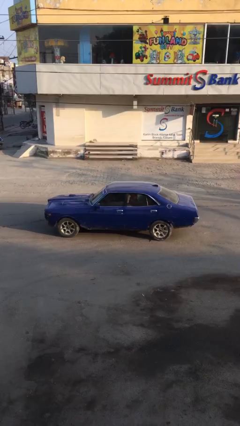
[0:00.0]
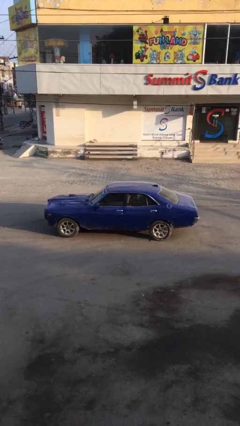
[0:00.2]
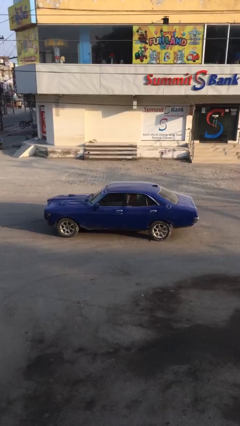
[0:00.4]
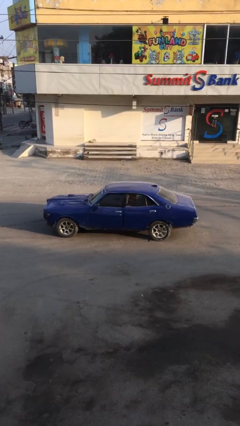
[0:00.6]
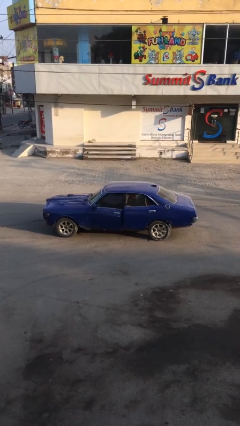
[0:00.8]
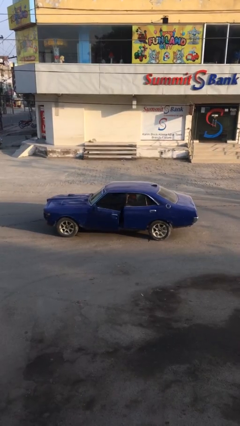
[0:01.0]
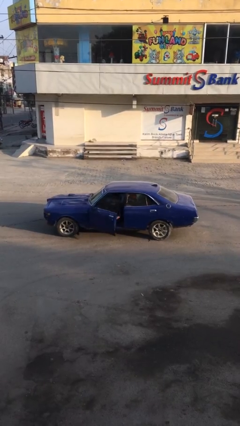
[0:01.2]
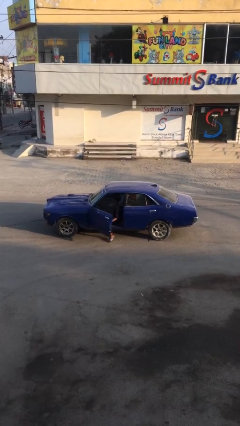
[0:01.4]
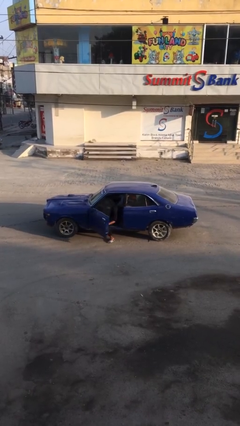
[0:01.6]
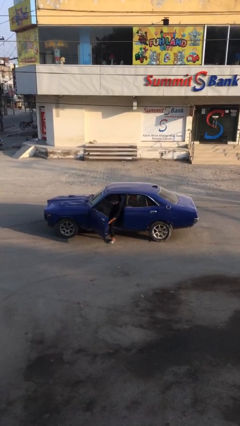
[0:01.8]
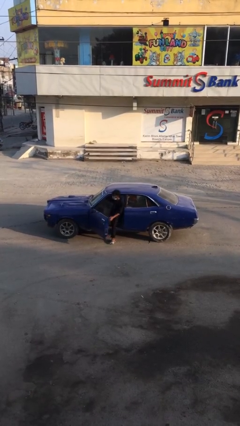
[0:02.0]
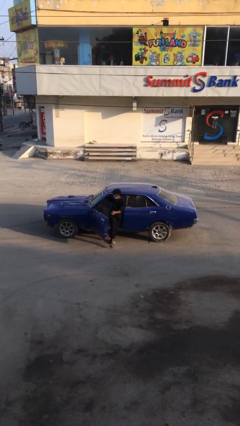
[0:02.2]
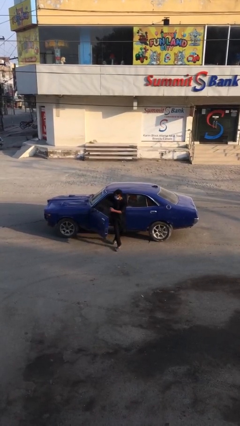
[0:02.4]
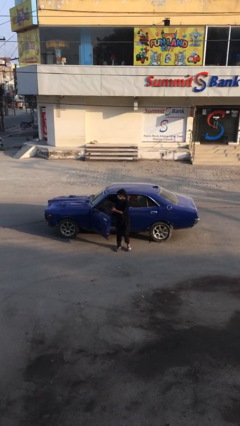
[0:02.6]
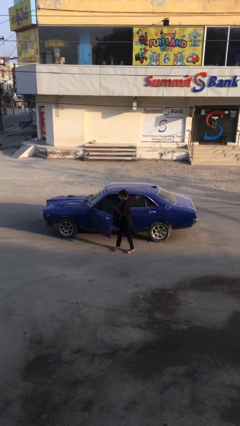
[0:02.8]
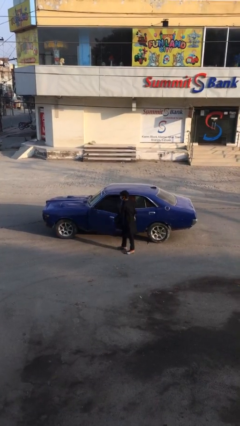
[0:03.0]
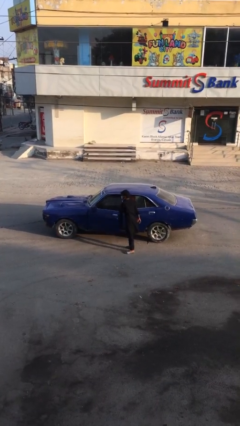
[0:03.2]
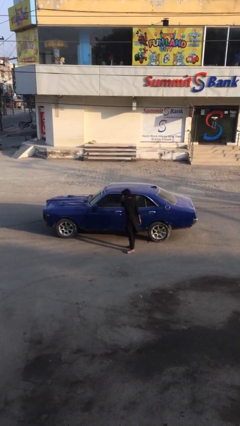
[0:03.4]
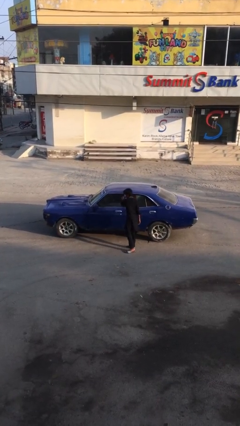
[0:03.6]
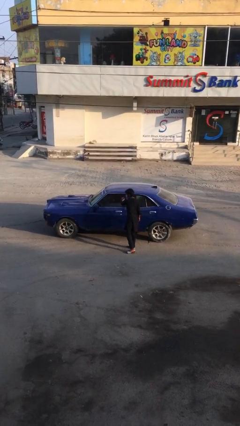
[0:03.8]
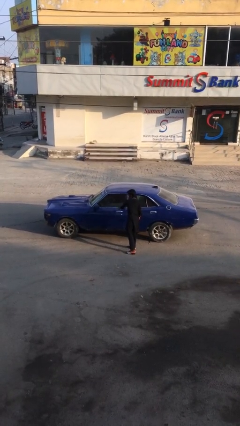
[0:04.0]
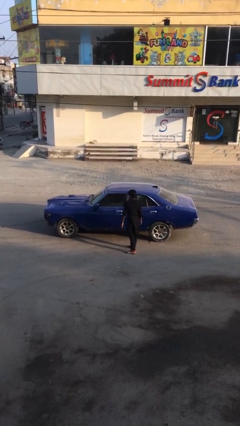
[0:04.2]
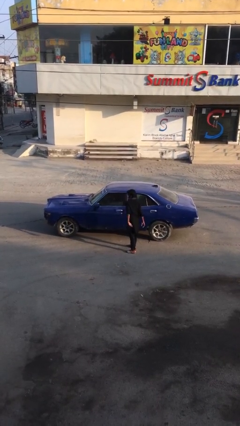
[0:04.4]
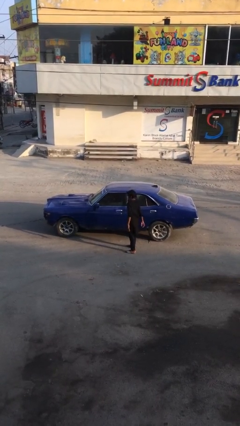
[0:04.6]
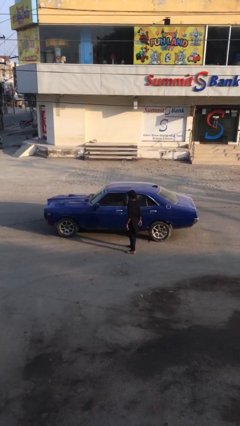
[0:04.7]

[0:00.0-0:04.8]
car drops off person

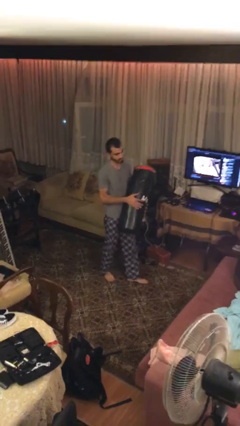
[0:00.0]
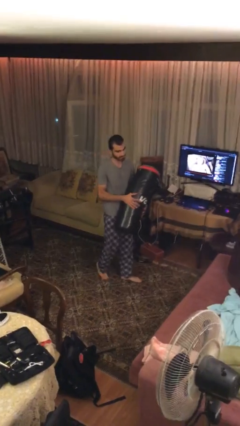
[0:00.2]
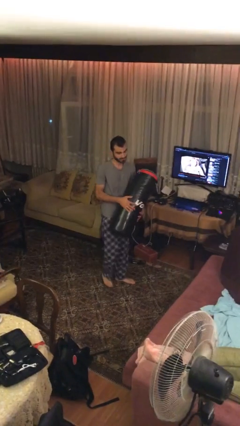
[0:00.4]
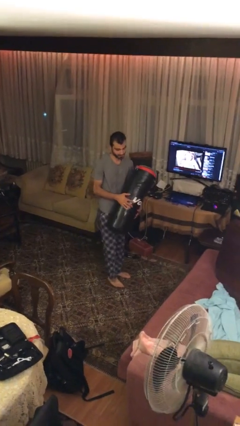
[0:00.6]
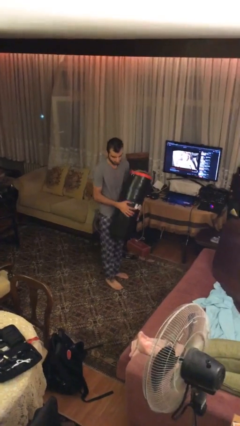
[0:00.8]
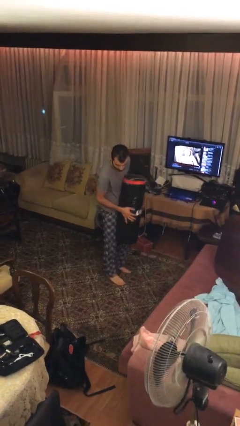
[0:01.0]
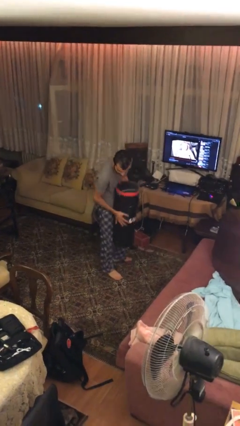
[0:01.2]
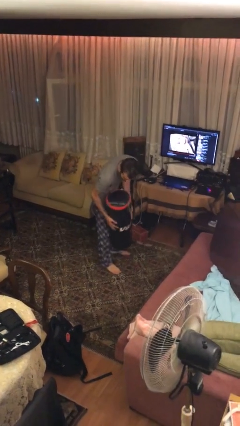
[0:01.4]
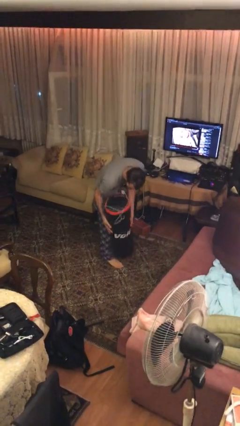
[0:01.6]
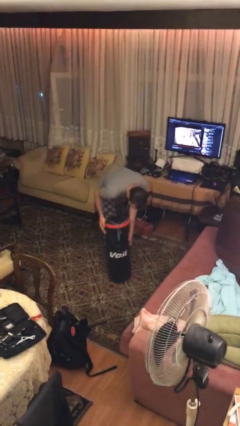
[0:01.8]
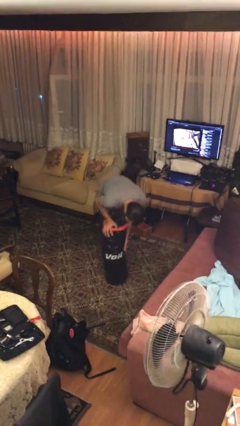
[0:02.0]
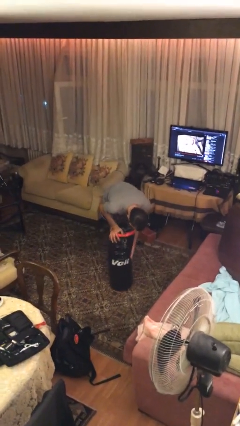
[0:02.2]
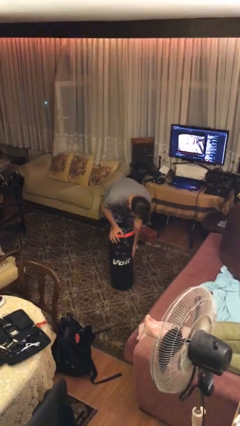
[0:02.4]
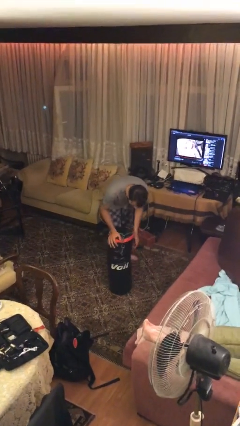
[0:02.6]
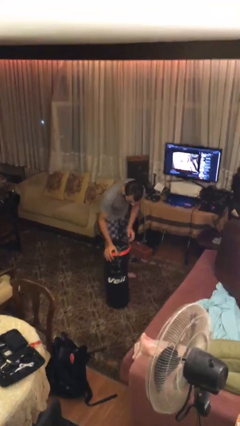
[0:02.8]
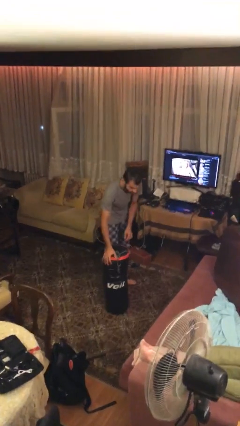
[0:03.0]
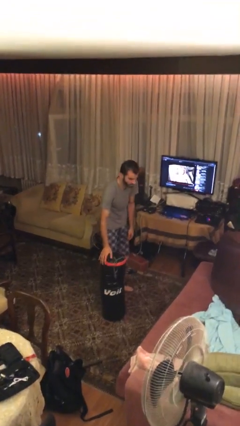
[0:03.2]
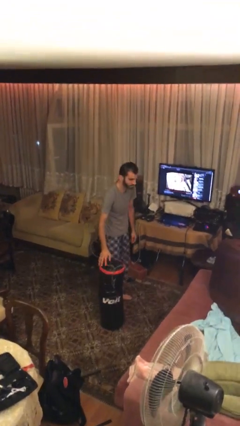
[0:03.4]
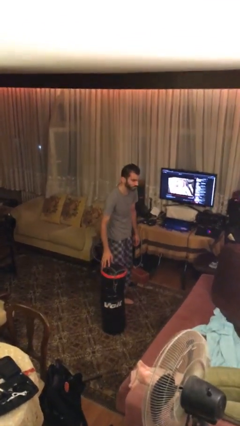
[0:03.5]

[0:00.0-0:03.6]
person puts down object on floor

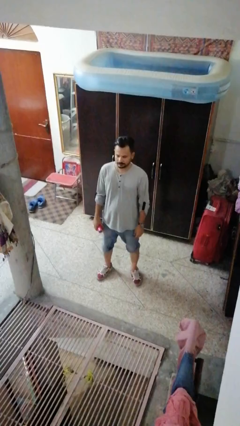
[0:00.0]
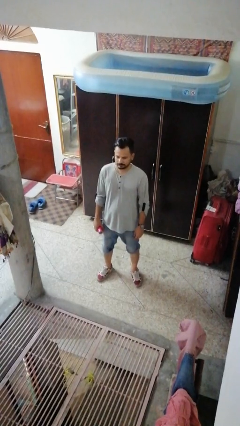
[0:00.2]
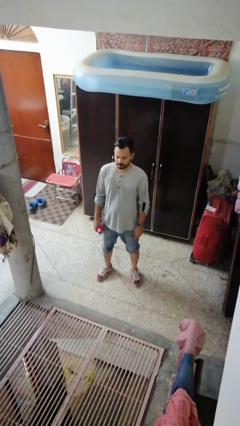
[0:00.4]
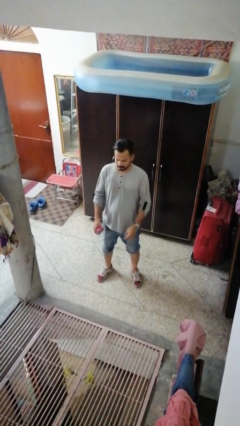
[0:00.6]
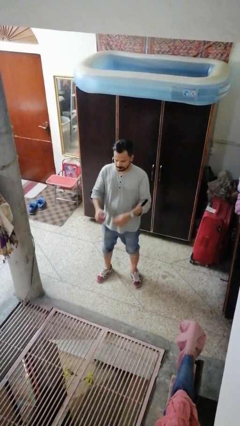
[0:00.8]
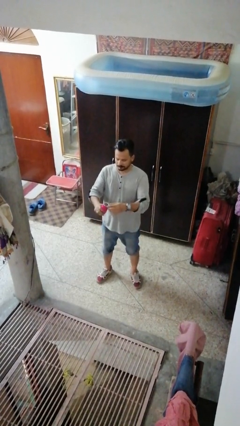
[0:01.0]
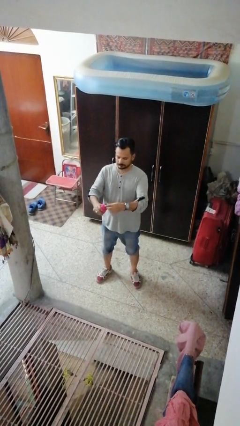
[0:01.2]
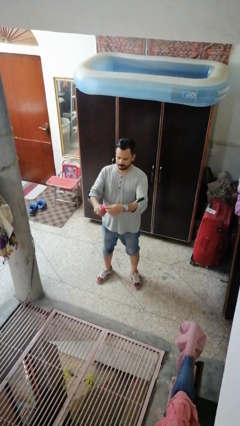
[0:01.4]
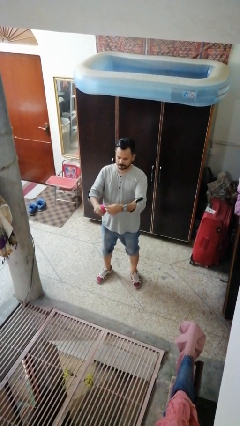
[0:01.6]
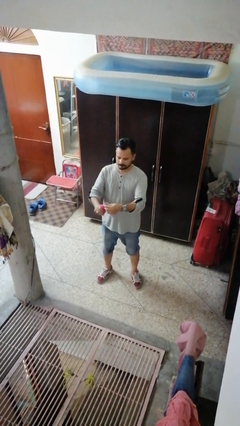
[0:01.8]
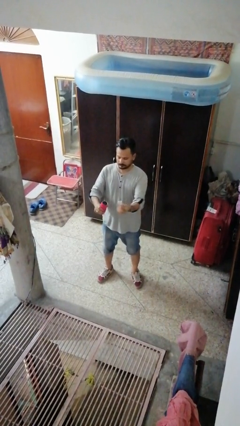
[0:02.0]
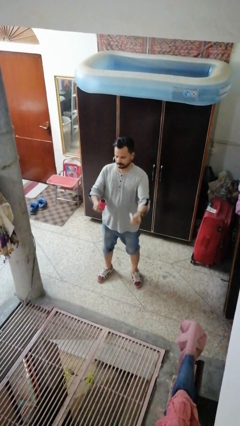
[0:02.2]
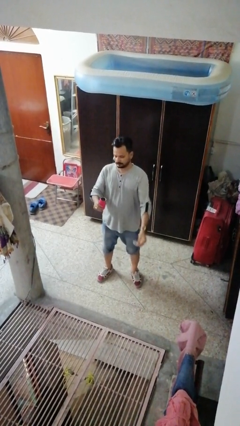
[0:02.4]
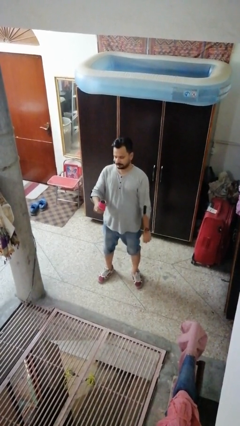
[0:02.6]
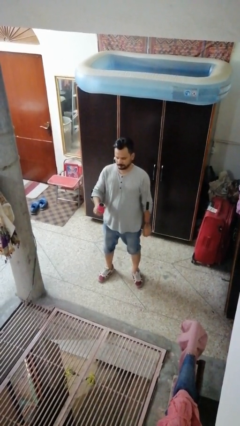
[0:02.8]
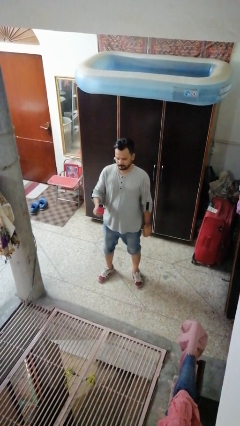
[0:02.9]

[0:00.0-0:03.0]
person opens beverage can

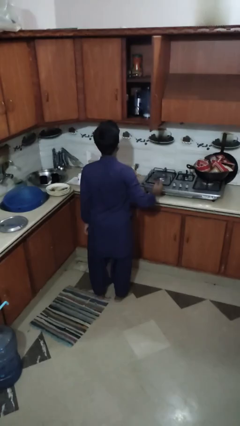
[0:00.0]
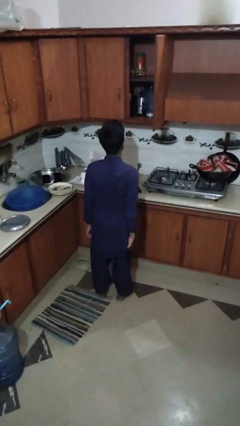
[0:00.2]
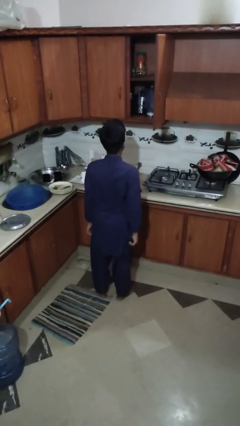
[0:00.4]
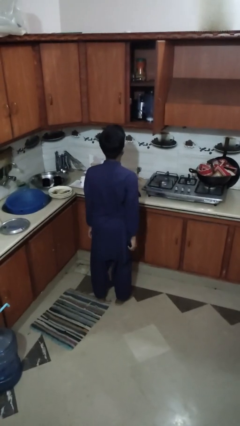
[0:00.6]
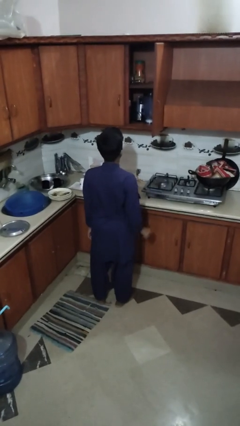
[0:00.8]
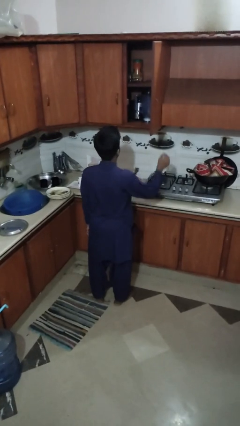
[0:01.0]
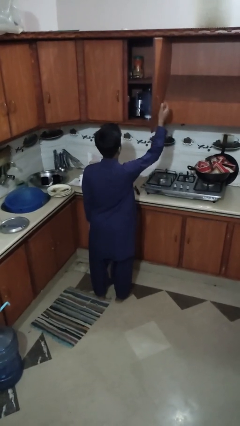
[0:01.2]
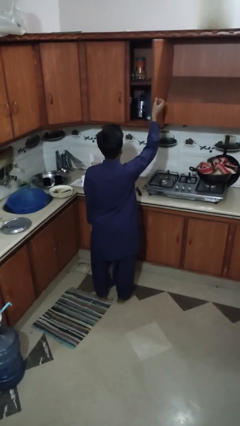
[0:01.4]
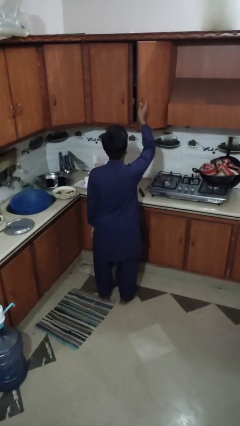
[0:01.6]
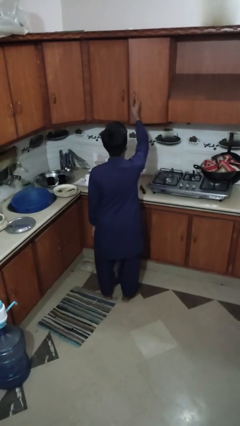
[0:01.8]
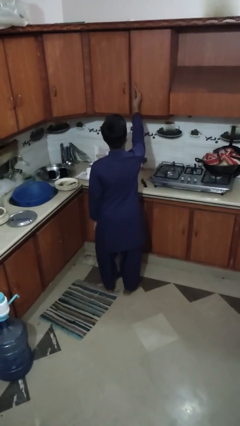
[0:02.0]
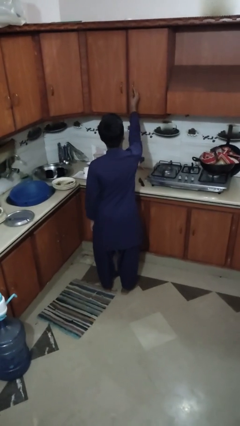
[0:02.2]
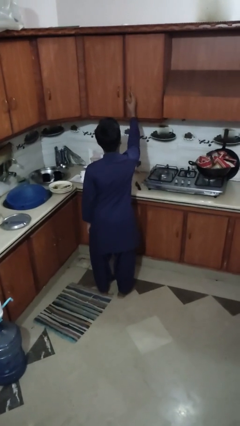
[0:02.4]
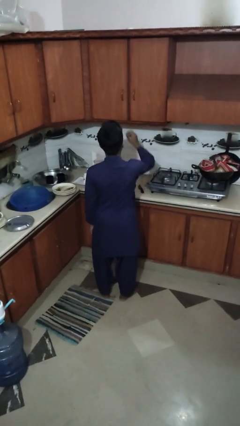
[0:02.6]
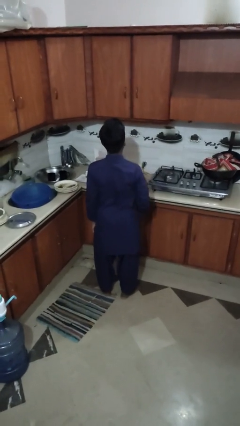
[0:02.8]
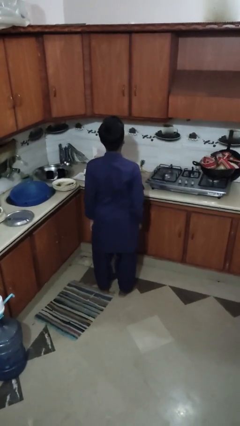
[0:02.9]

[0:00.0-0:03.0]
person closes cabinet

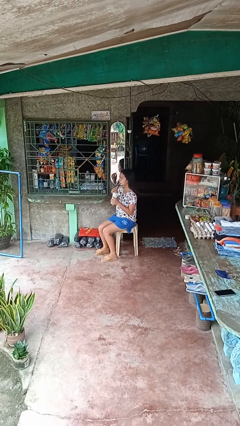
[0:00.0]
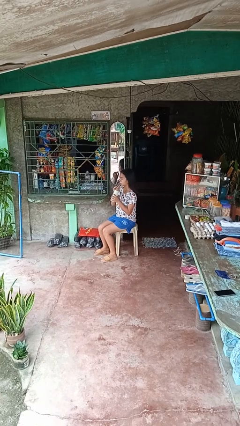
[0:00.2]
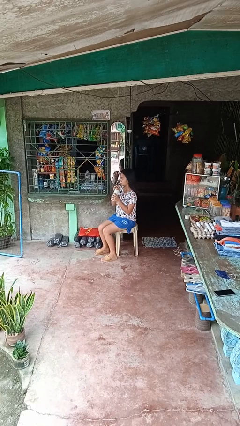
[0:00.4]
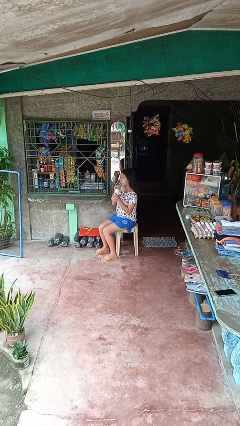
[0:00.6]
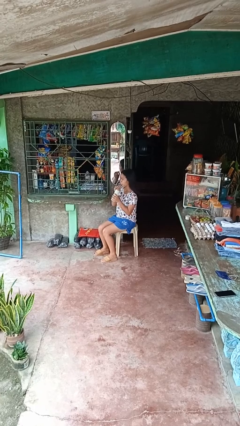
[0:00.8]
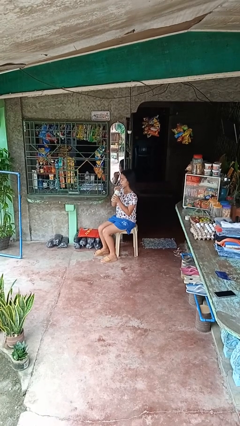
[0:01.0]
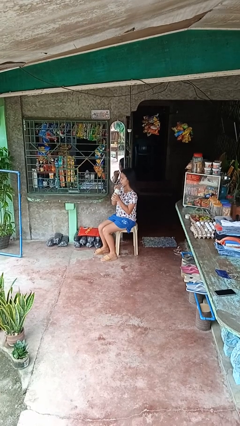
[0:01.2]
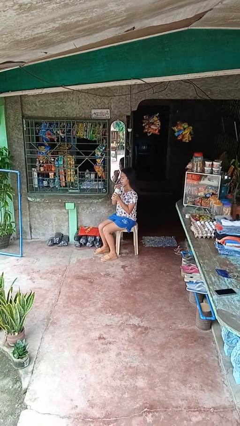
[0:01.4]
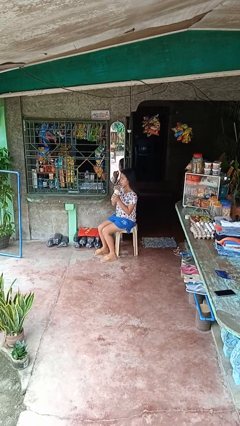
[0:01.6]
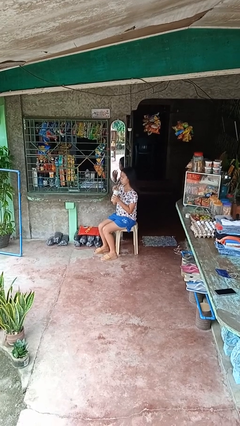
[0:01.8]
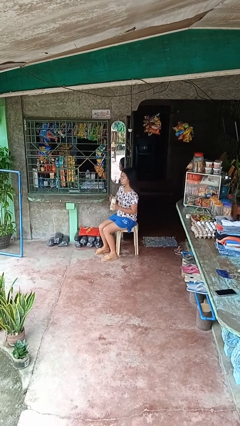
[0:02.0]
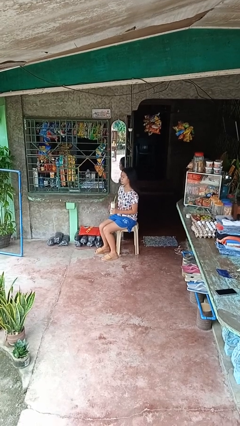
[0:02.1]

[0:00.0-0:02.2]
person drinks from straw

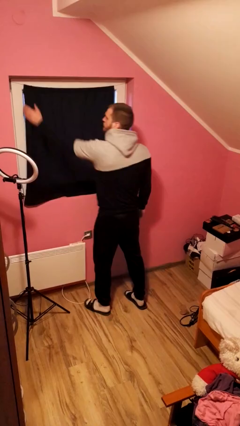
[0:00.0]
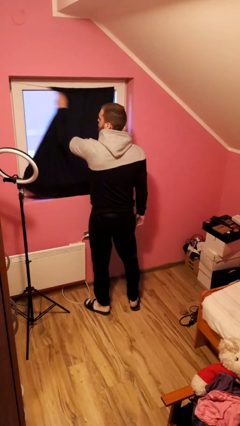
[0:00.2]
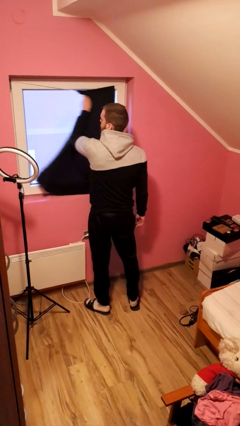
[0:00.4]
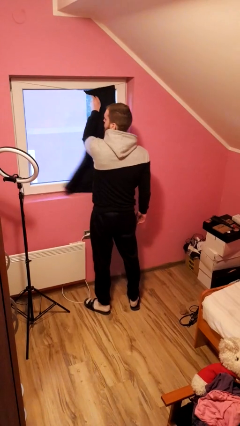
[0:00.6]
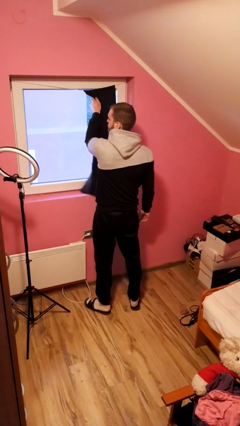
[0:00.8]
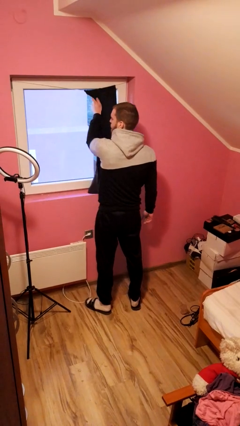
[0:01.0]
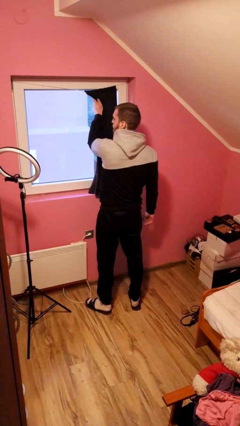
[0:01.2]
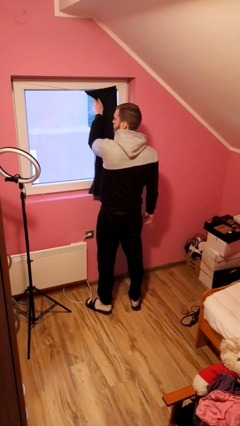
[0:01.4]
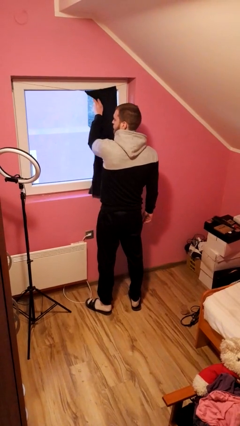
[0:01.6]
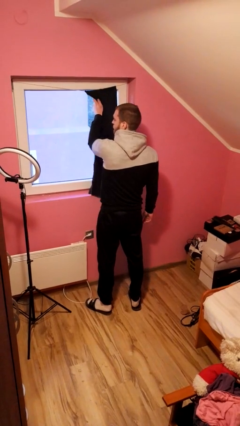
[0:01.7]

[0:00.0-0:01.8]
person opens curtains
